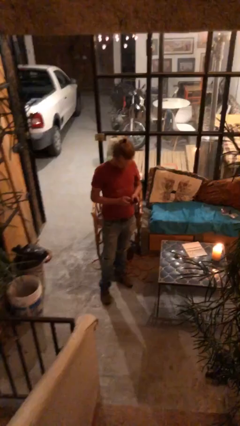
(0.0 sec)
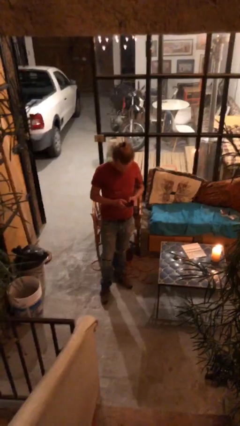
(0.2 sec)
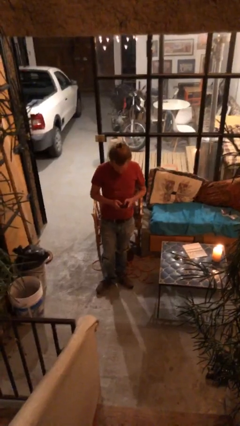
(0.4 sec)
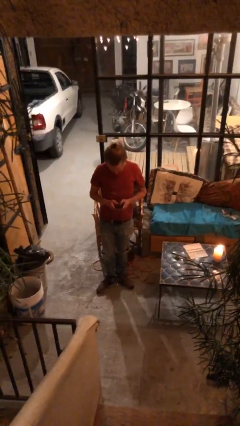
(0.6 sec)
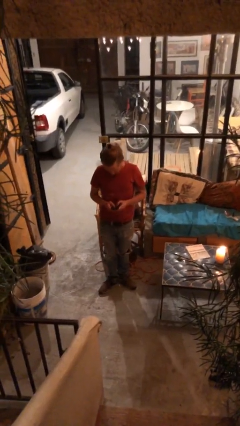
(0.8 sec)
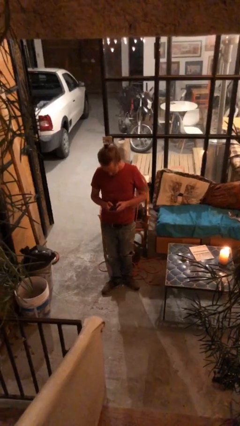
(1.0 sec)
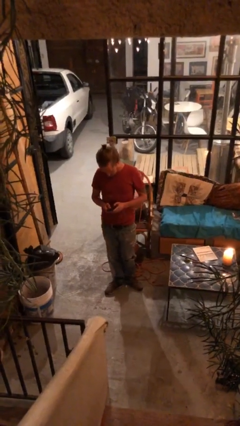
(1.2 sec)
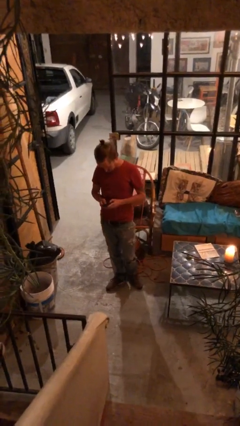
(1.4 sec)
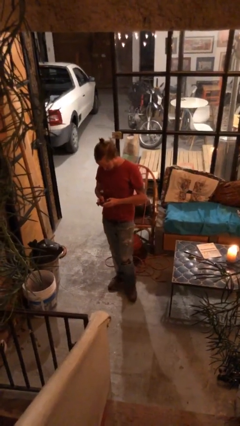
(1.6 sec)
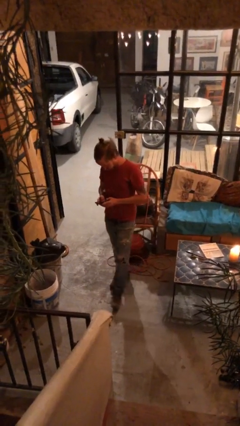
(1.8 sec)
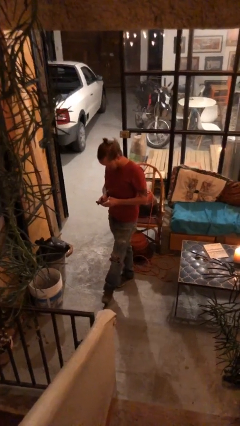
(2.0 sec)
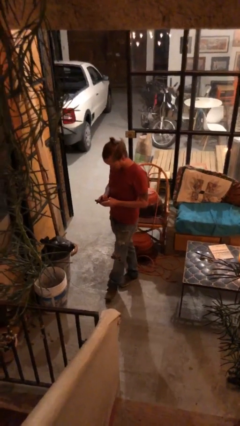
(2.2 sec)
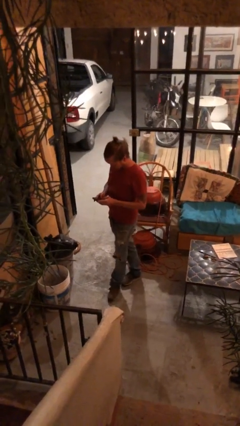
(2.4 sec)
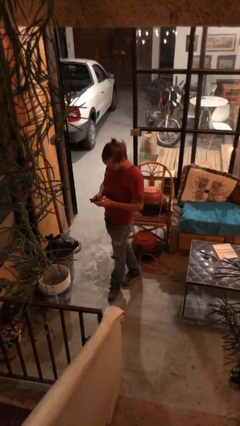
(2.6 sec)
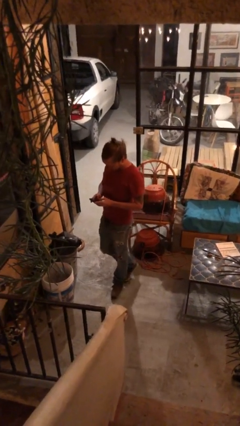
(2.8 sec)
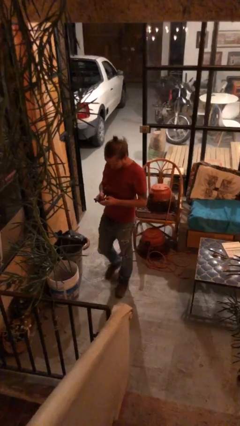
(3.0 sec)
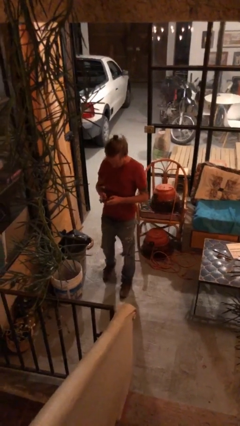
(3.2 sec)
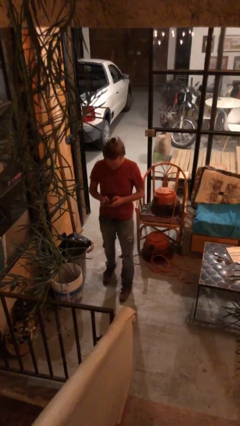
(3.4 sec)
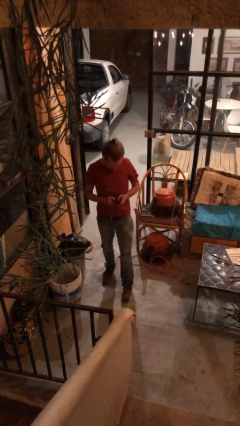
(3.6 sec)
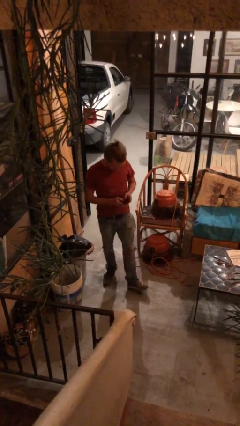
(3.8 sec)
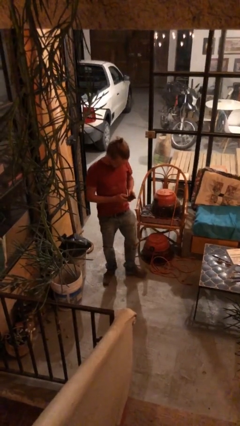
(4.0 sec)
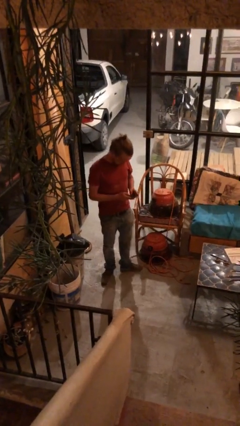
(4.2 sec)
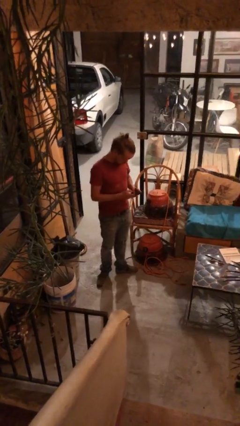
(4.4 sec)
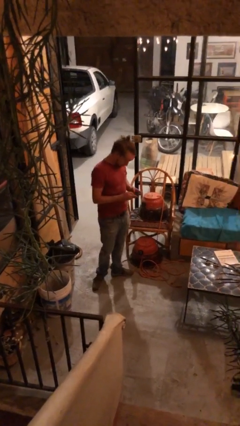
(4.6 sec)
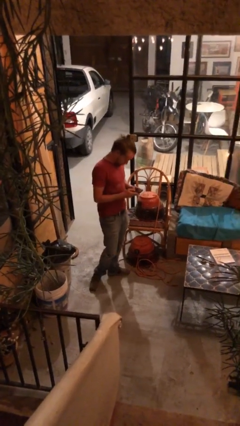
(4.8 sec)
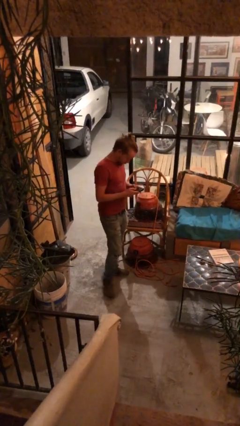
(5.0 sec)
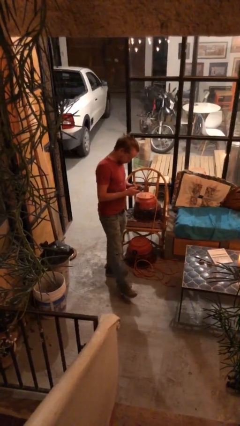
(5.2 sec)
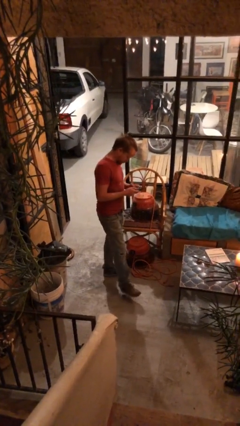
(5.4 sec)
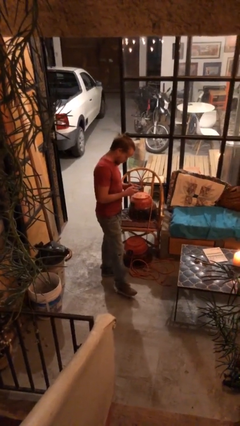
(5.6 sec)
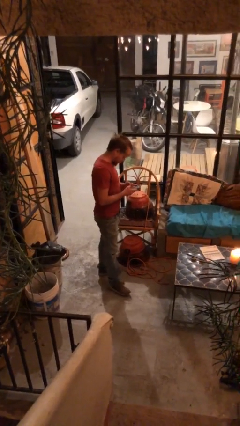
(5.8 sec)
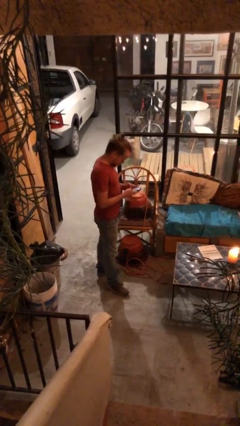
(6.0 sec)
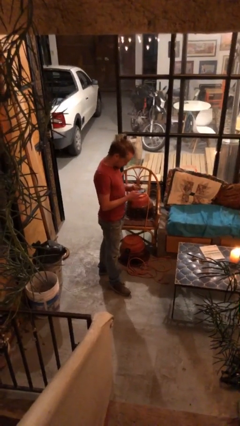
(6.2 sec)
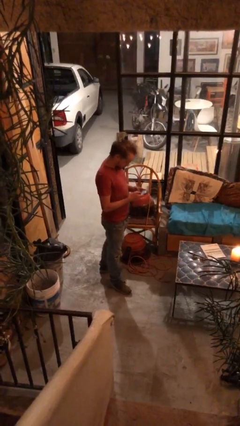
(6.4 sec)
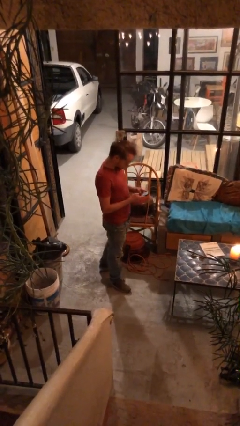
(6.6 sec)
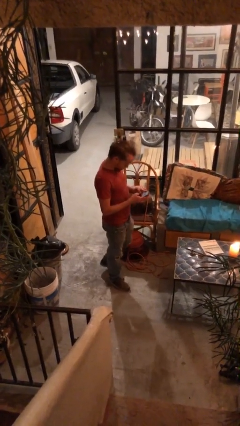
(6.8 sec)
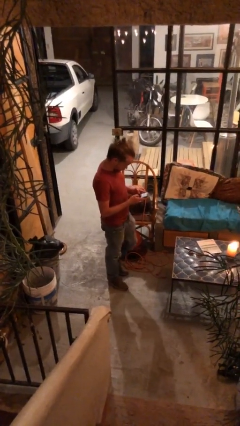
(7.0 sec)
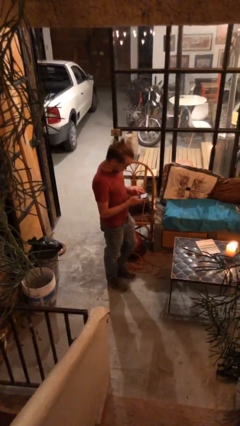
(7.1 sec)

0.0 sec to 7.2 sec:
person texts on phone

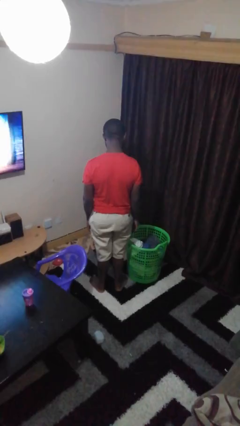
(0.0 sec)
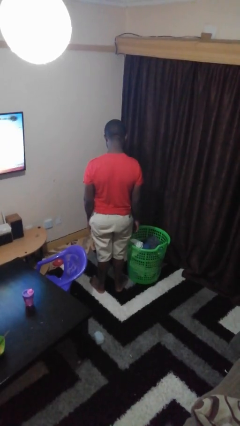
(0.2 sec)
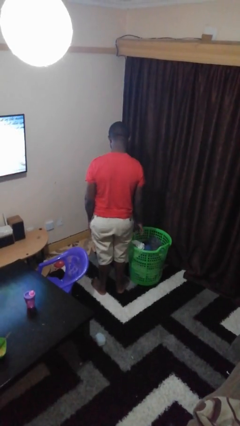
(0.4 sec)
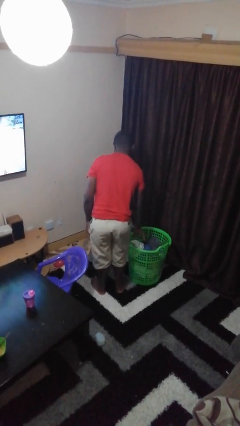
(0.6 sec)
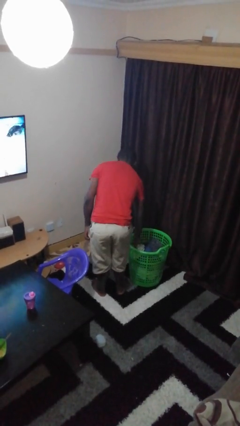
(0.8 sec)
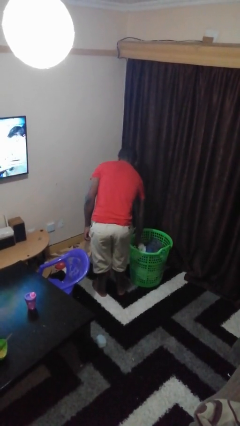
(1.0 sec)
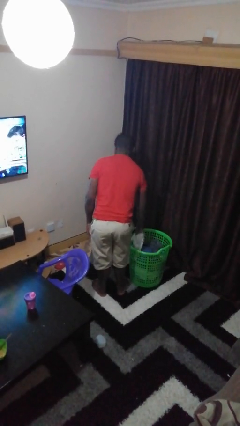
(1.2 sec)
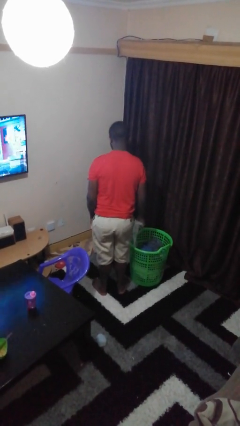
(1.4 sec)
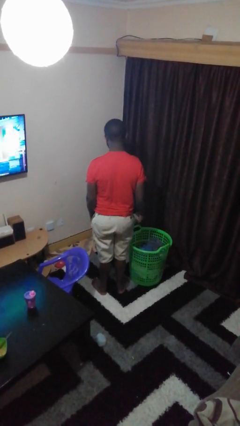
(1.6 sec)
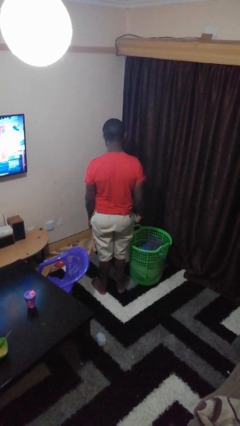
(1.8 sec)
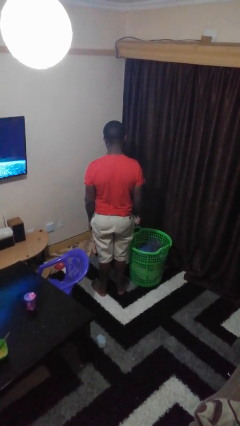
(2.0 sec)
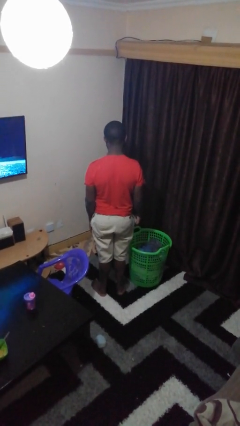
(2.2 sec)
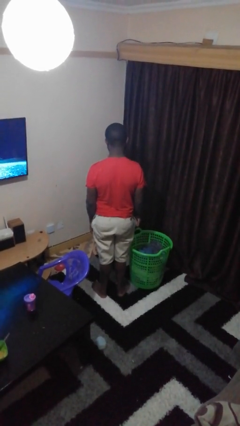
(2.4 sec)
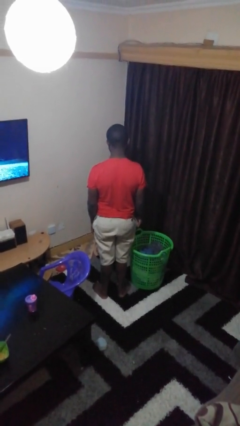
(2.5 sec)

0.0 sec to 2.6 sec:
person takes object from basket

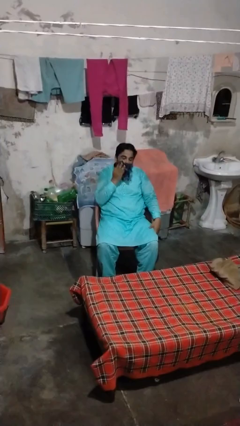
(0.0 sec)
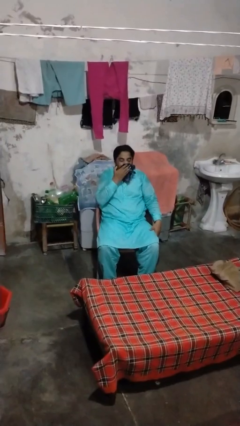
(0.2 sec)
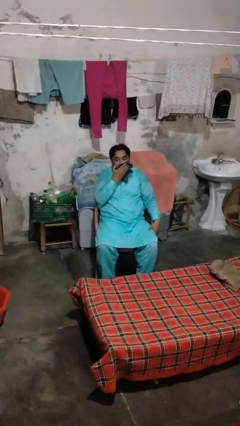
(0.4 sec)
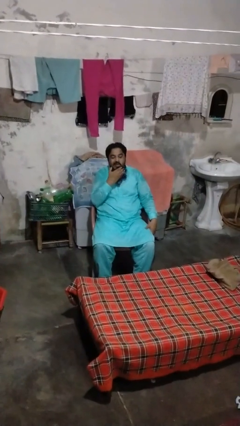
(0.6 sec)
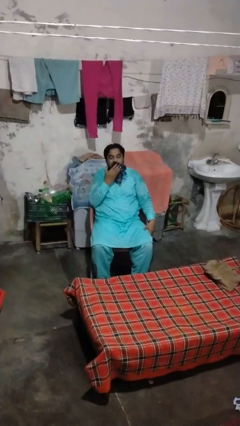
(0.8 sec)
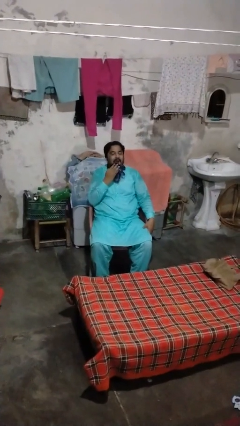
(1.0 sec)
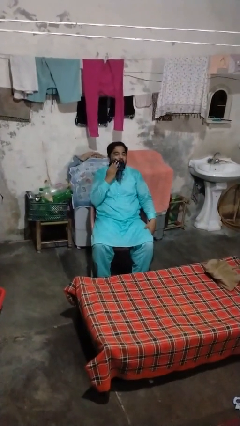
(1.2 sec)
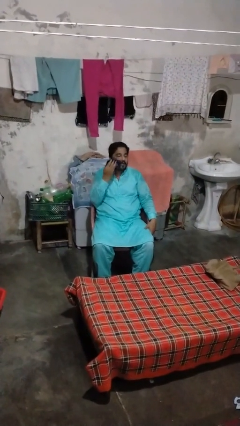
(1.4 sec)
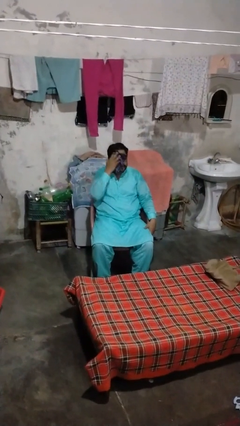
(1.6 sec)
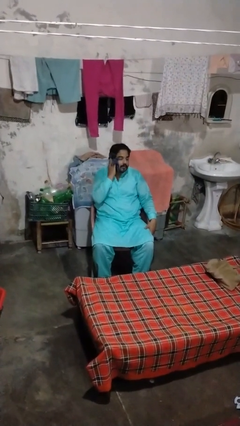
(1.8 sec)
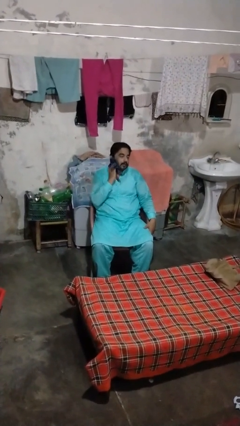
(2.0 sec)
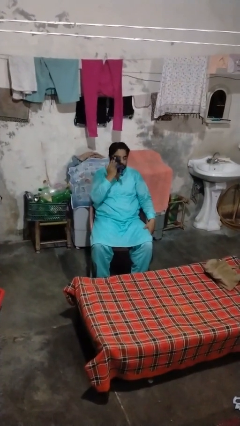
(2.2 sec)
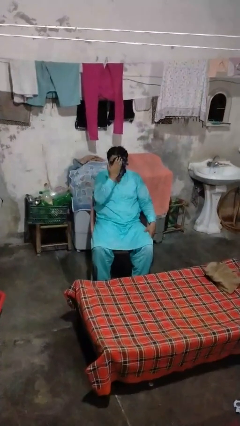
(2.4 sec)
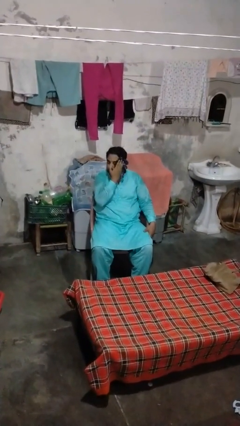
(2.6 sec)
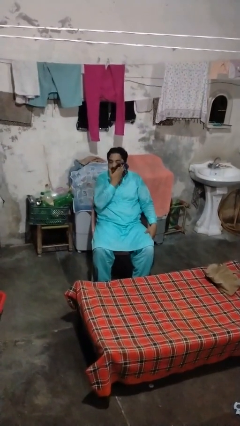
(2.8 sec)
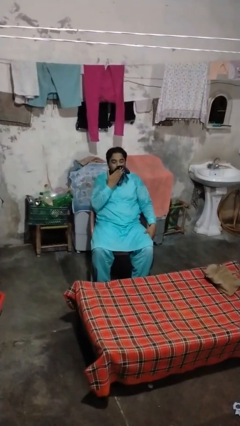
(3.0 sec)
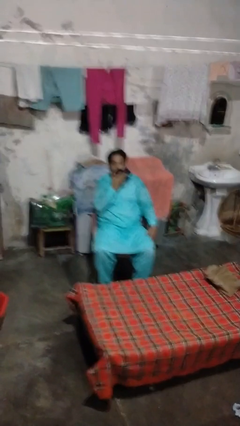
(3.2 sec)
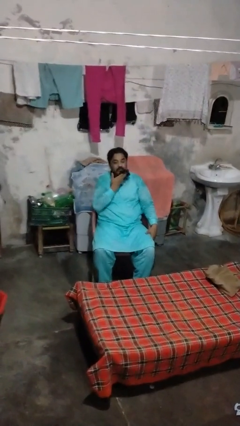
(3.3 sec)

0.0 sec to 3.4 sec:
person wipes mouth with napkin

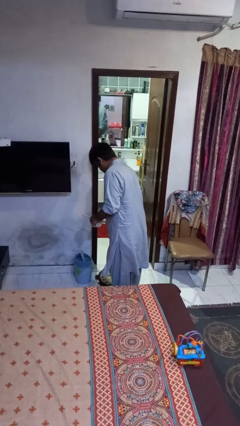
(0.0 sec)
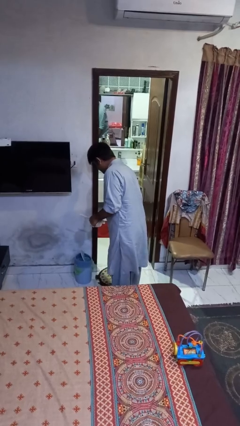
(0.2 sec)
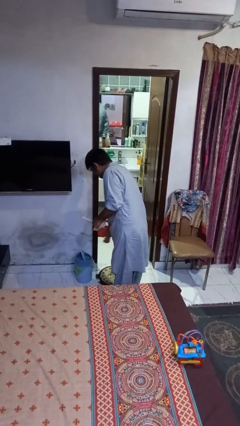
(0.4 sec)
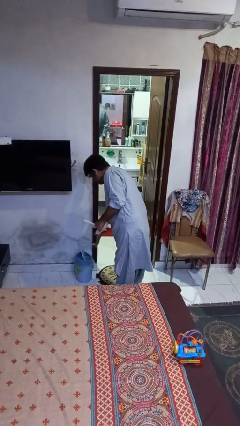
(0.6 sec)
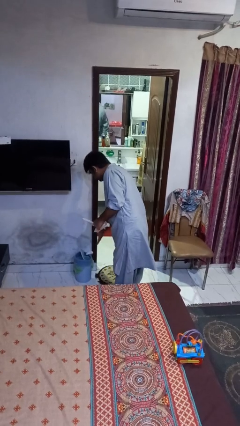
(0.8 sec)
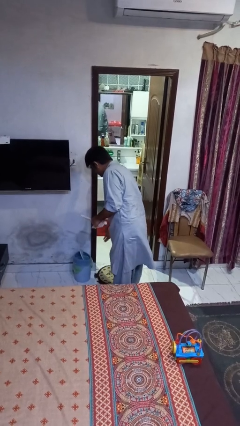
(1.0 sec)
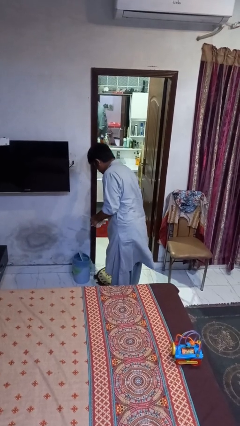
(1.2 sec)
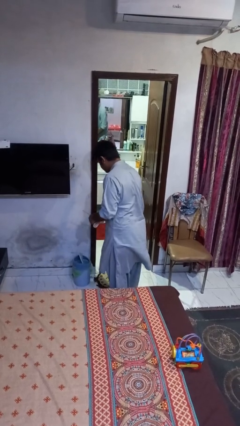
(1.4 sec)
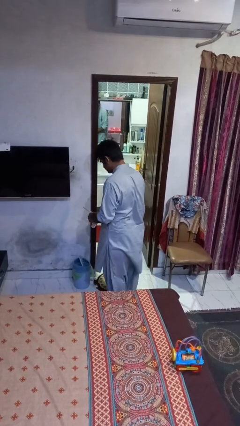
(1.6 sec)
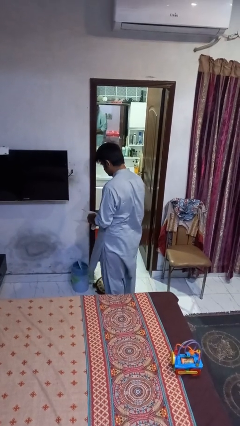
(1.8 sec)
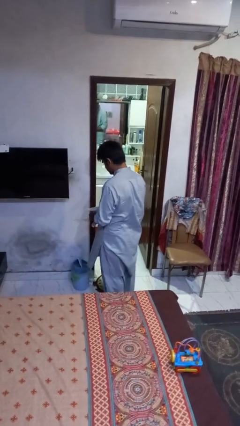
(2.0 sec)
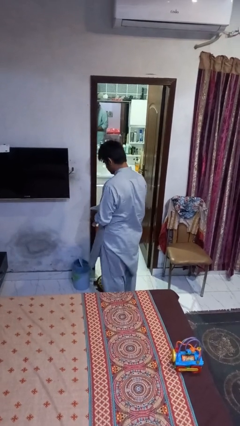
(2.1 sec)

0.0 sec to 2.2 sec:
person discards trash

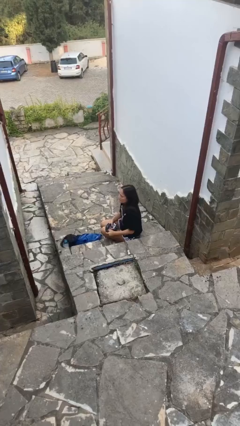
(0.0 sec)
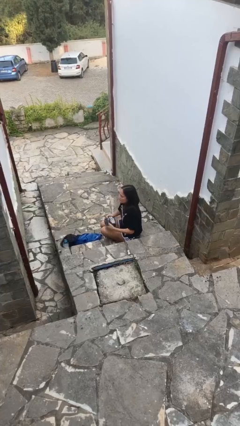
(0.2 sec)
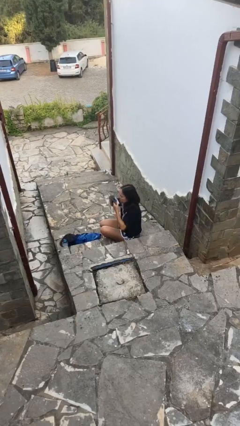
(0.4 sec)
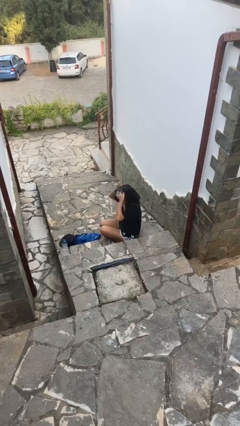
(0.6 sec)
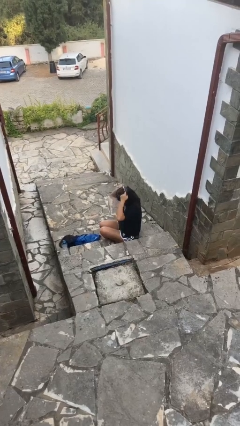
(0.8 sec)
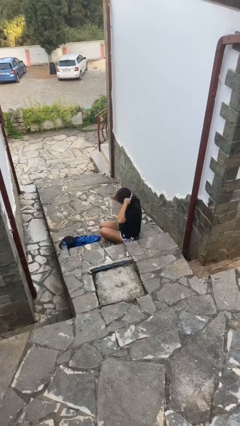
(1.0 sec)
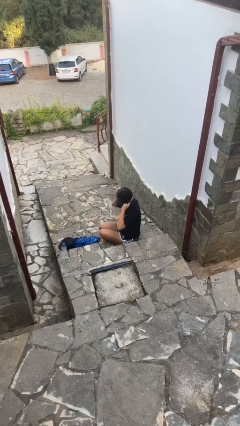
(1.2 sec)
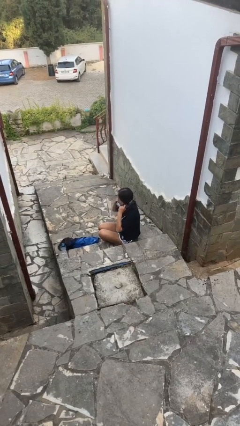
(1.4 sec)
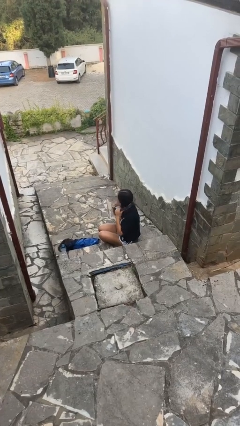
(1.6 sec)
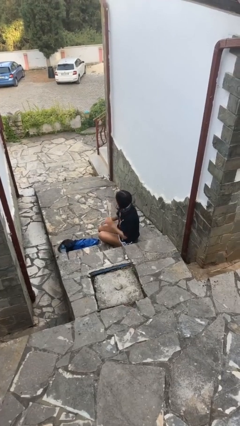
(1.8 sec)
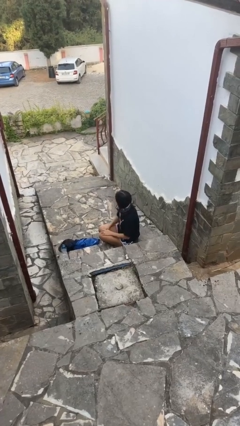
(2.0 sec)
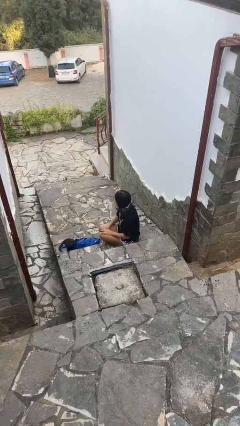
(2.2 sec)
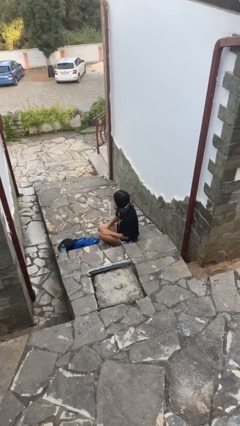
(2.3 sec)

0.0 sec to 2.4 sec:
person puts on scarf
